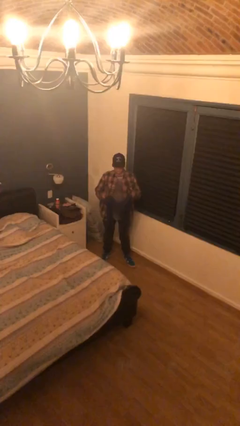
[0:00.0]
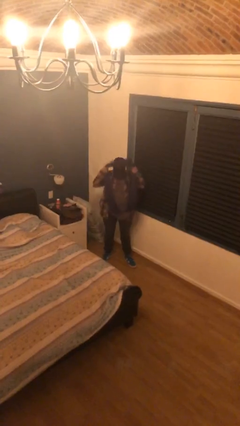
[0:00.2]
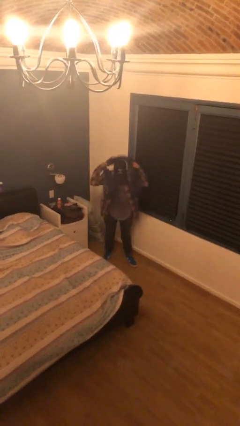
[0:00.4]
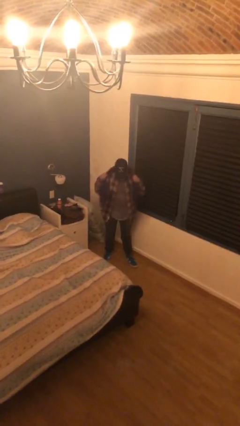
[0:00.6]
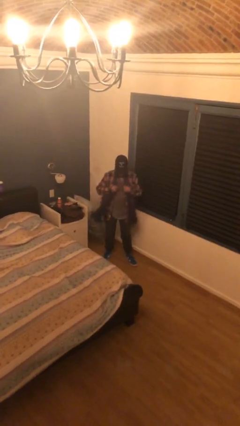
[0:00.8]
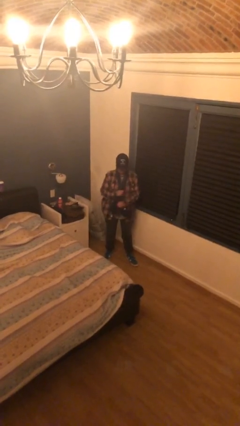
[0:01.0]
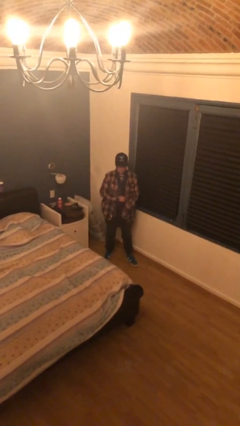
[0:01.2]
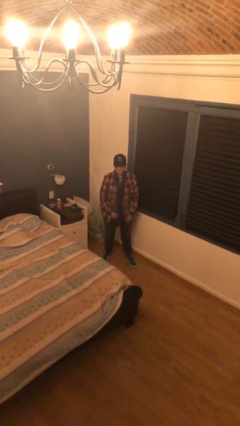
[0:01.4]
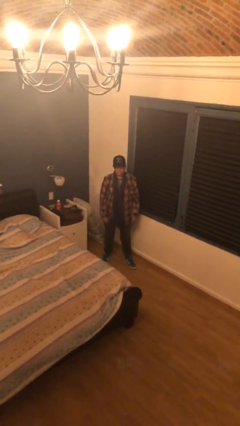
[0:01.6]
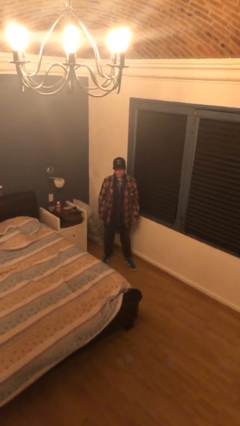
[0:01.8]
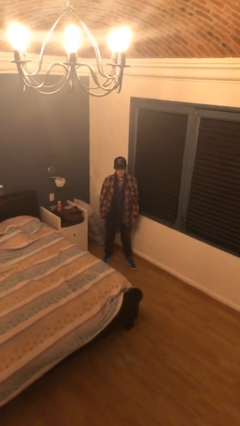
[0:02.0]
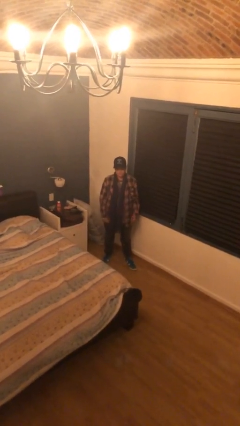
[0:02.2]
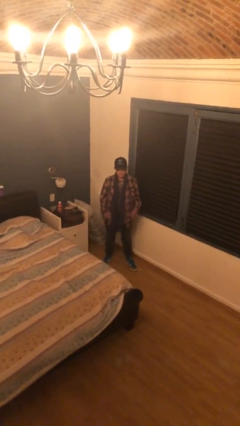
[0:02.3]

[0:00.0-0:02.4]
person puts on scarf

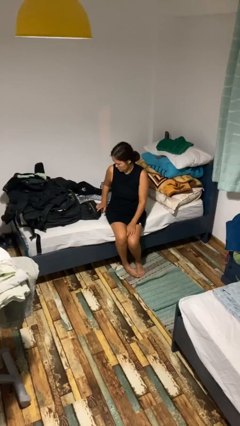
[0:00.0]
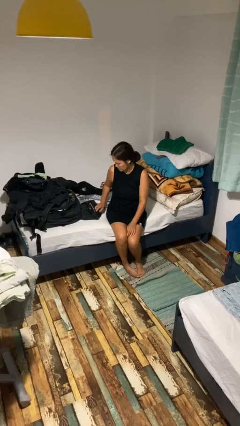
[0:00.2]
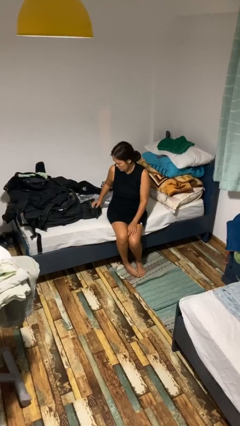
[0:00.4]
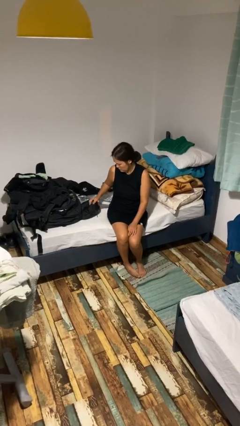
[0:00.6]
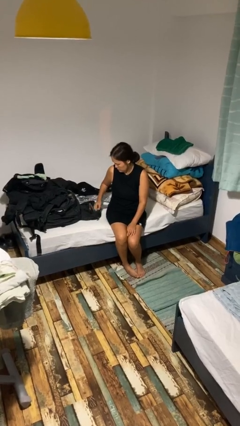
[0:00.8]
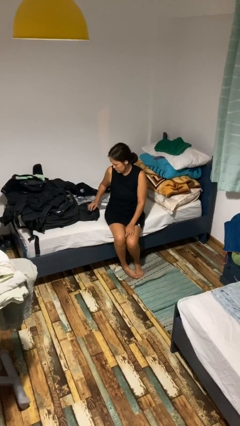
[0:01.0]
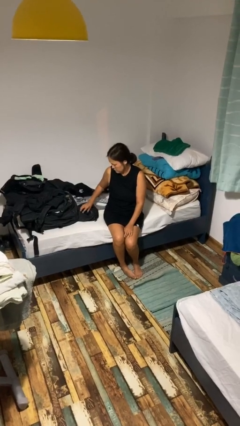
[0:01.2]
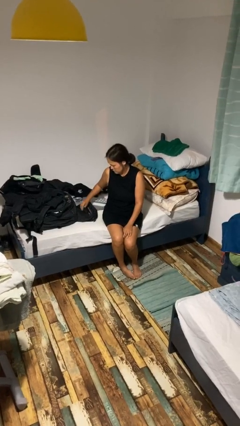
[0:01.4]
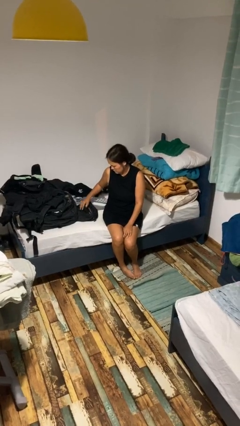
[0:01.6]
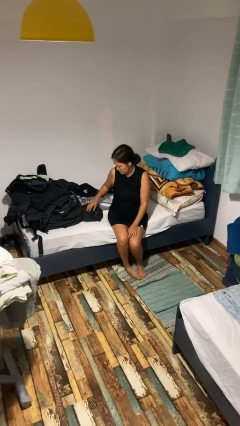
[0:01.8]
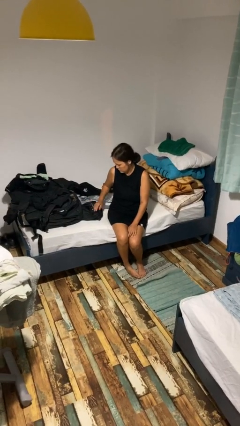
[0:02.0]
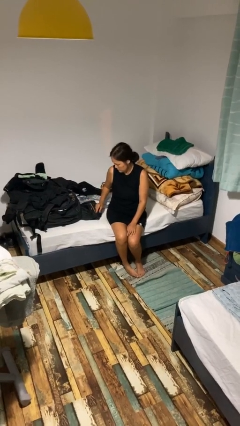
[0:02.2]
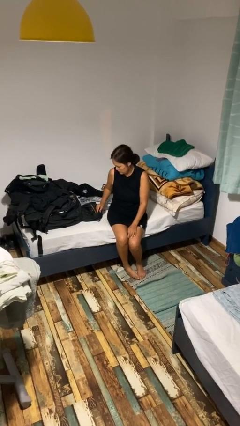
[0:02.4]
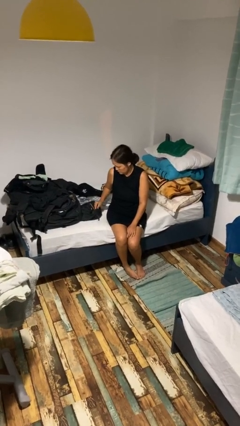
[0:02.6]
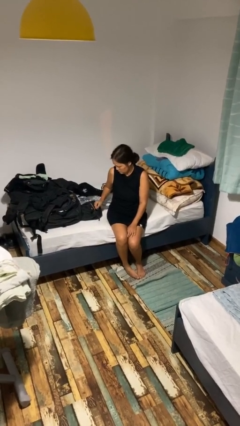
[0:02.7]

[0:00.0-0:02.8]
person taps object with finger

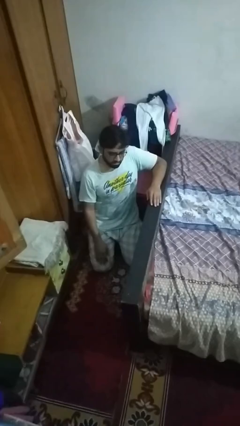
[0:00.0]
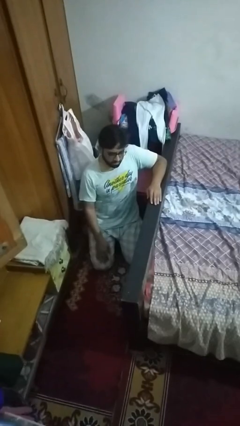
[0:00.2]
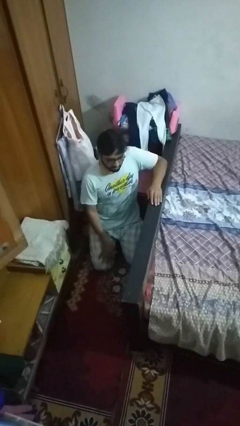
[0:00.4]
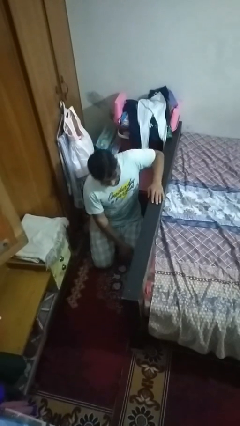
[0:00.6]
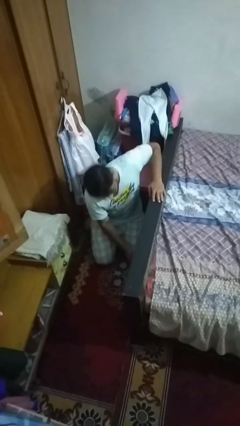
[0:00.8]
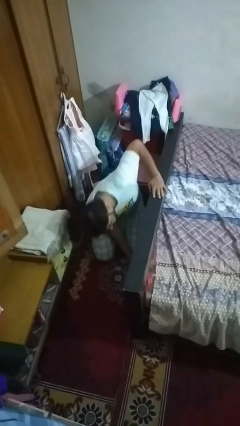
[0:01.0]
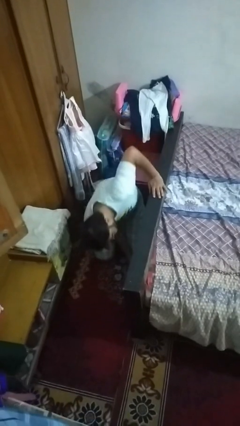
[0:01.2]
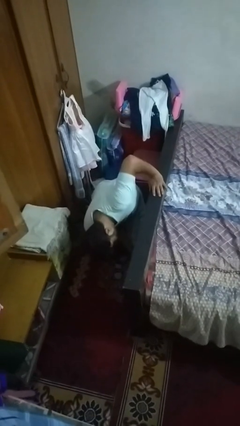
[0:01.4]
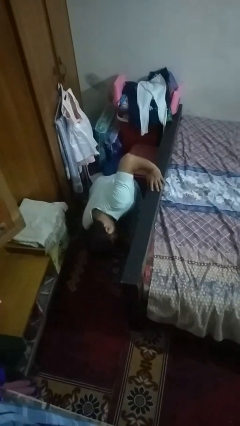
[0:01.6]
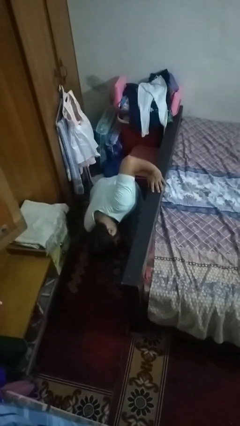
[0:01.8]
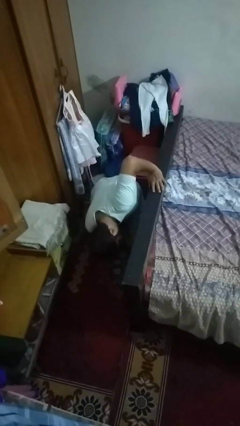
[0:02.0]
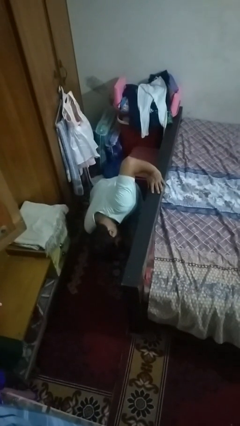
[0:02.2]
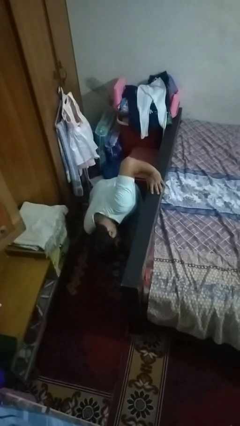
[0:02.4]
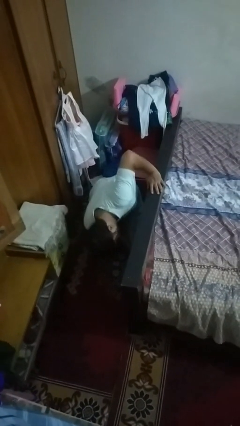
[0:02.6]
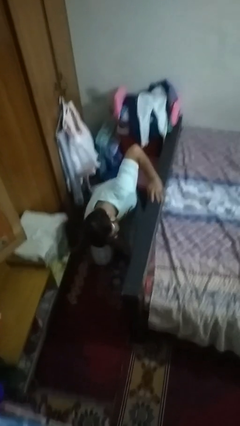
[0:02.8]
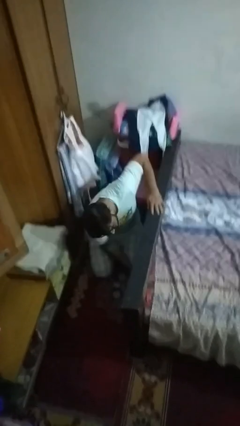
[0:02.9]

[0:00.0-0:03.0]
person searches under bed

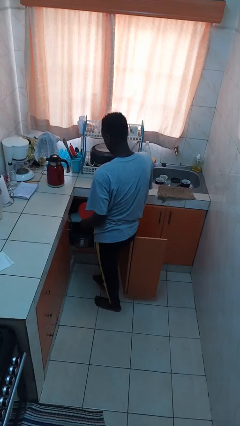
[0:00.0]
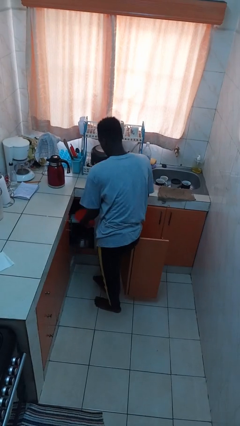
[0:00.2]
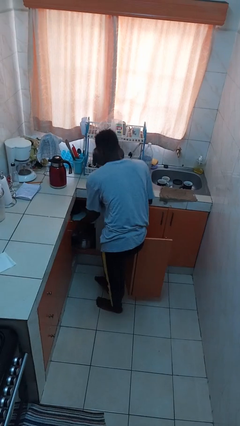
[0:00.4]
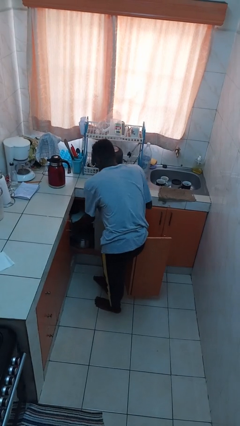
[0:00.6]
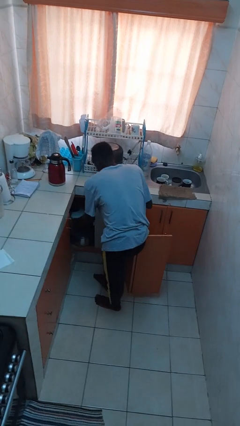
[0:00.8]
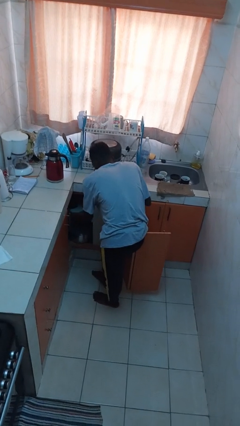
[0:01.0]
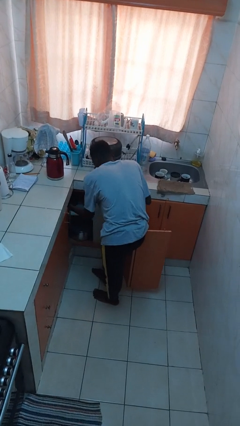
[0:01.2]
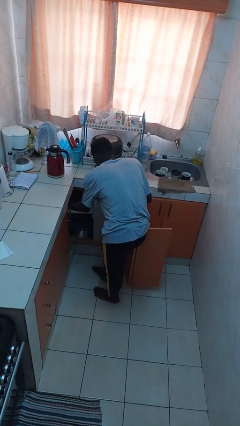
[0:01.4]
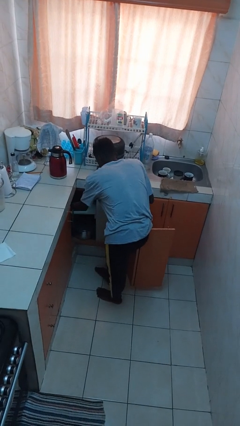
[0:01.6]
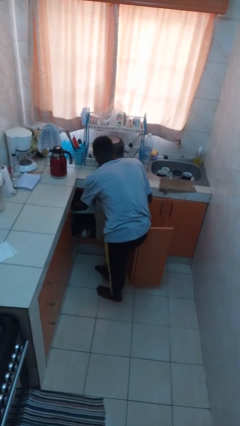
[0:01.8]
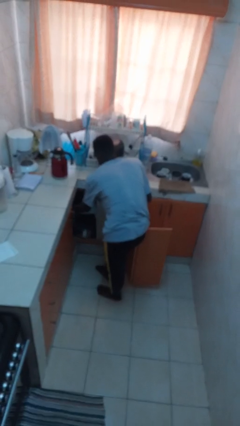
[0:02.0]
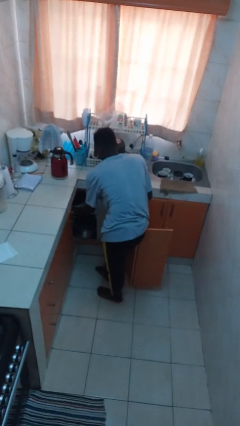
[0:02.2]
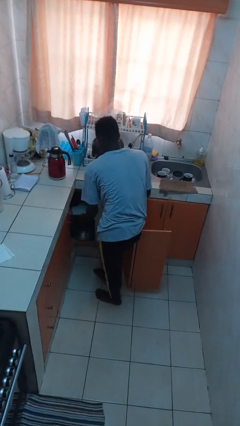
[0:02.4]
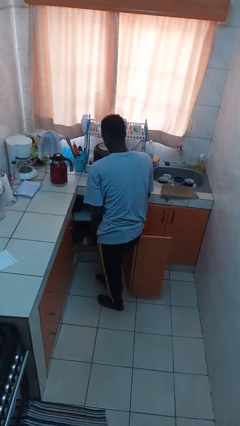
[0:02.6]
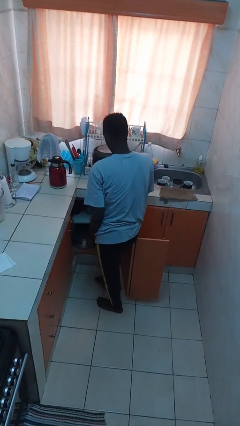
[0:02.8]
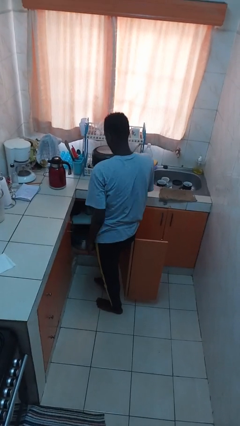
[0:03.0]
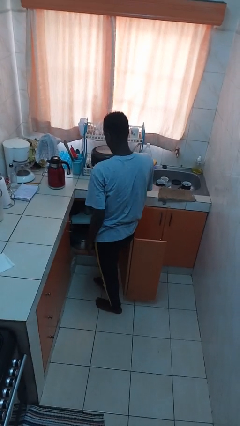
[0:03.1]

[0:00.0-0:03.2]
person puts object in cabinet

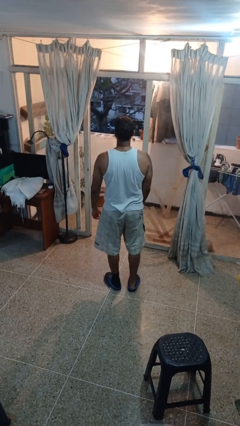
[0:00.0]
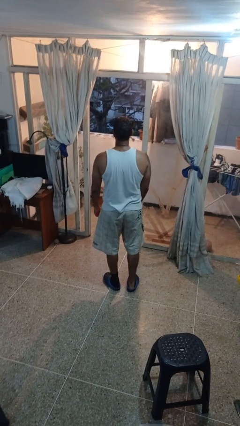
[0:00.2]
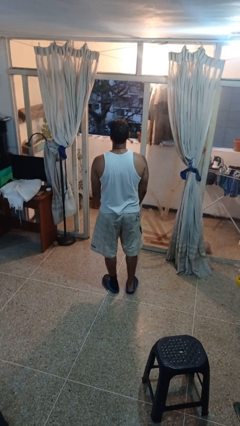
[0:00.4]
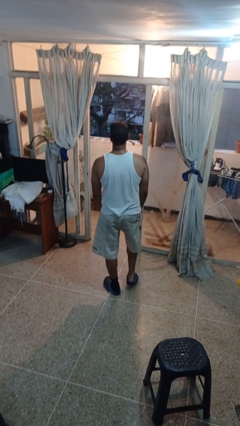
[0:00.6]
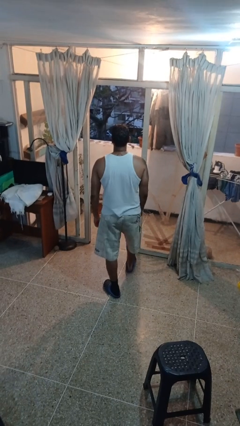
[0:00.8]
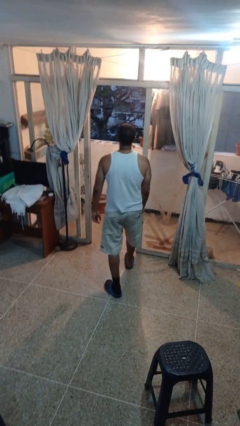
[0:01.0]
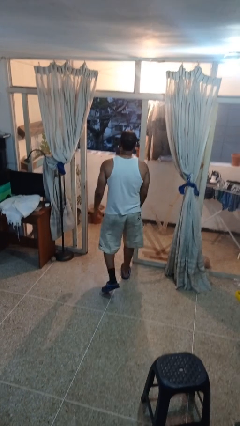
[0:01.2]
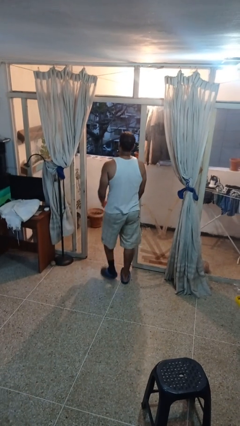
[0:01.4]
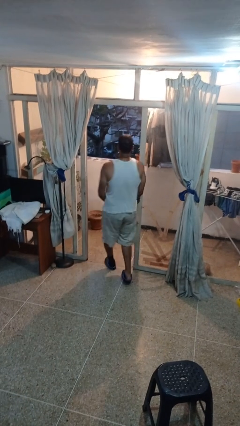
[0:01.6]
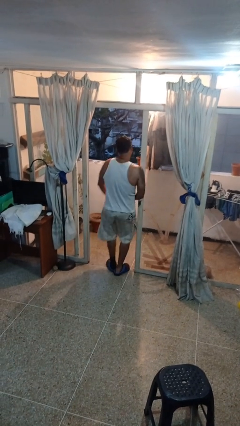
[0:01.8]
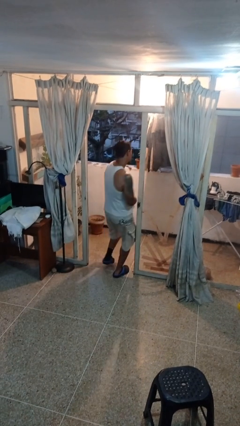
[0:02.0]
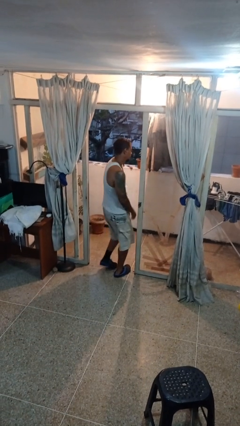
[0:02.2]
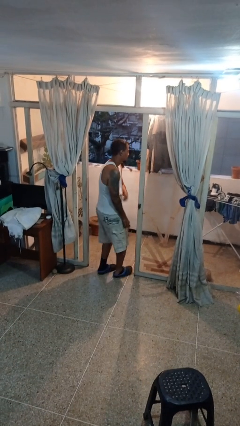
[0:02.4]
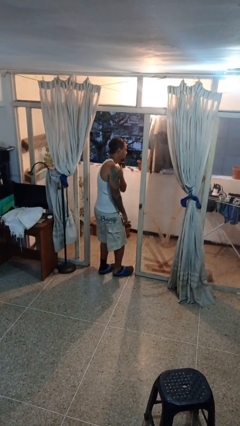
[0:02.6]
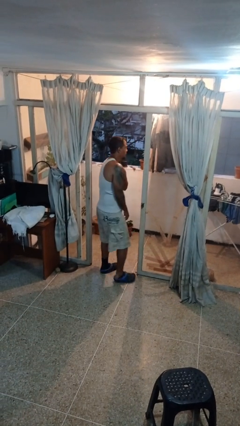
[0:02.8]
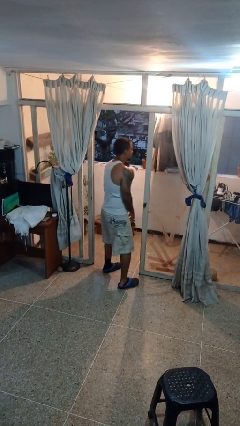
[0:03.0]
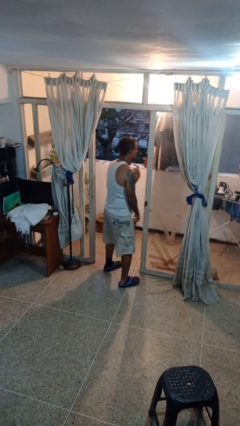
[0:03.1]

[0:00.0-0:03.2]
person bumps into wall

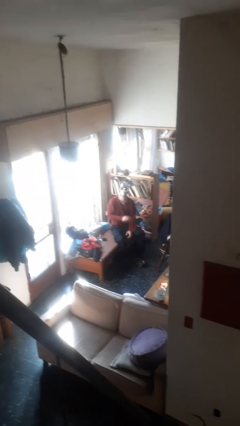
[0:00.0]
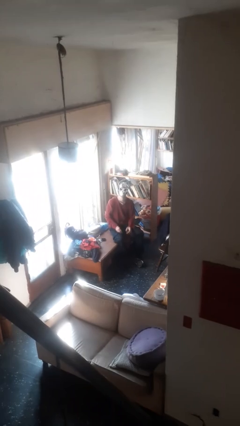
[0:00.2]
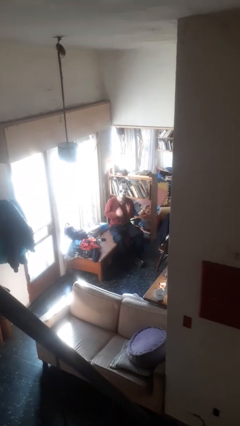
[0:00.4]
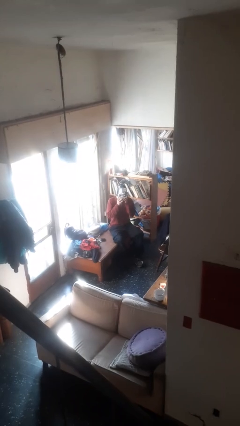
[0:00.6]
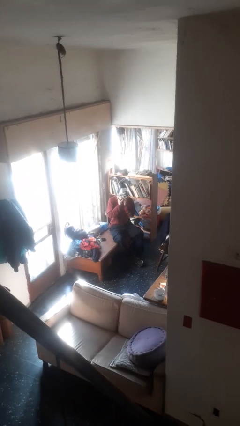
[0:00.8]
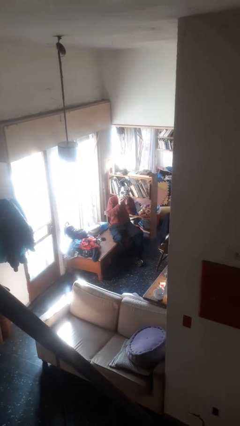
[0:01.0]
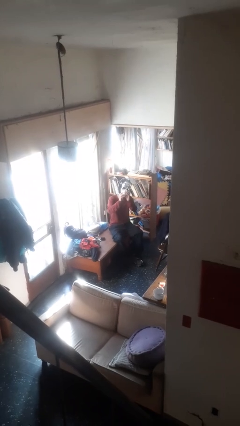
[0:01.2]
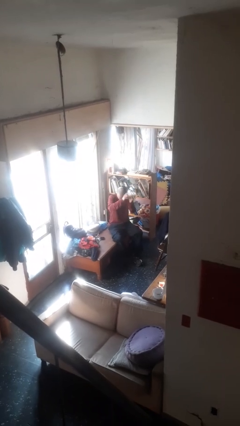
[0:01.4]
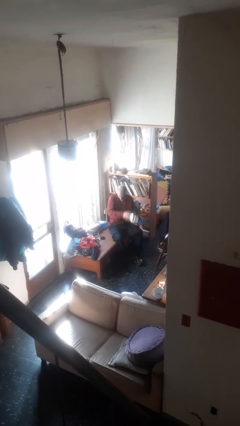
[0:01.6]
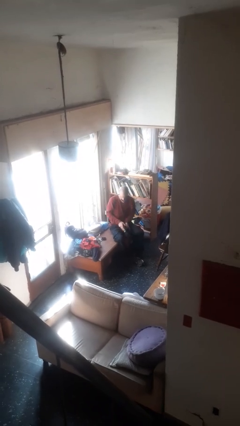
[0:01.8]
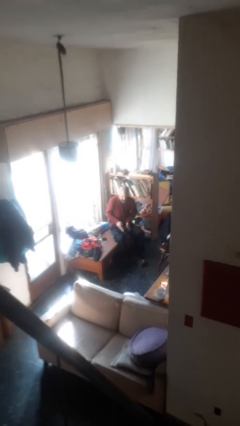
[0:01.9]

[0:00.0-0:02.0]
person takes off facemask

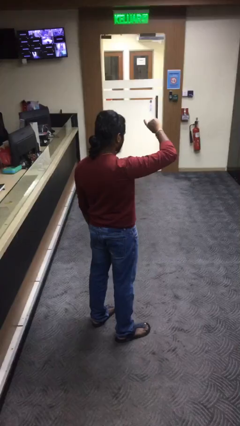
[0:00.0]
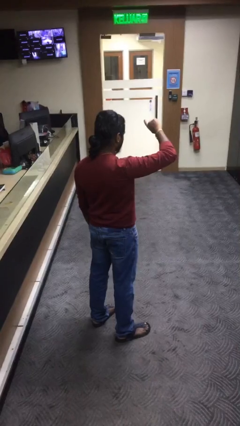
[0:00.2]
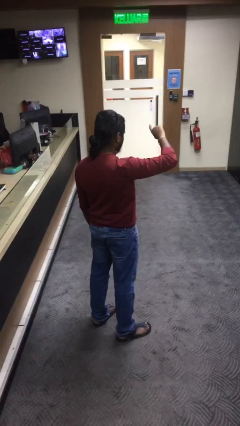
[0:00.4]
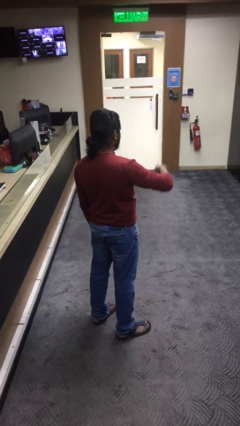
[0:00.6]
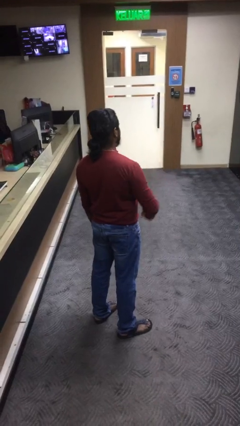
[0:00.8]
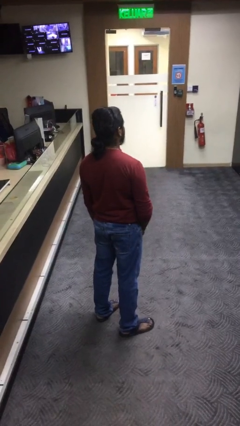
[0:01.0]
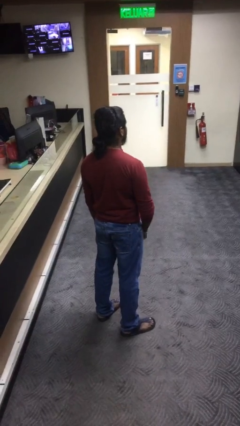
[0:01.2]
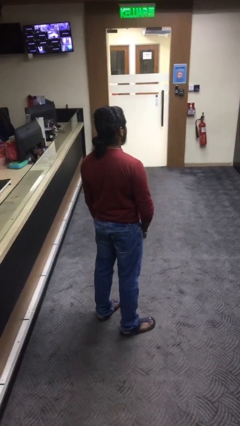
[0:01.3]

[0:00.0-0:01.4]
person gestures swipe down
